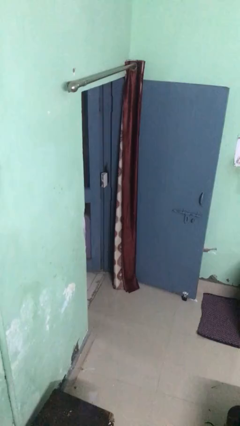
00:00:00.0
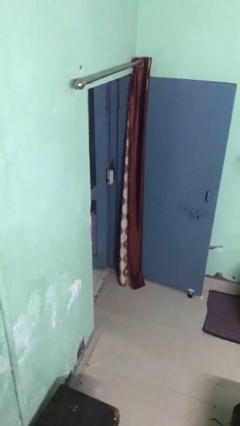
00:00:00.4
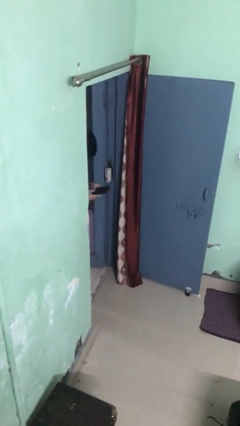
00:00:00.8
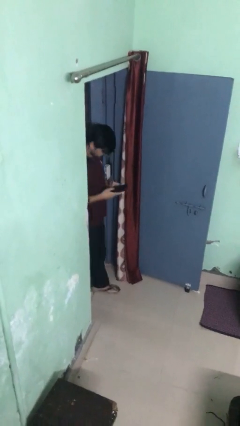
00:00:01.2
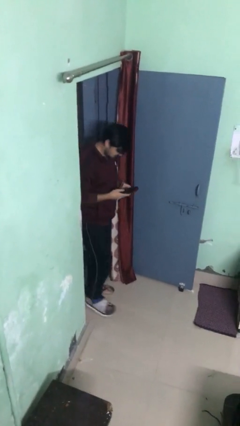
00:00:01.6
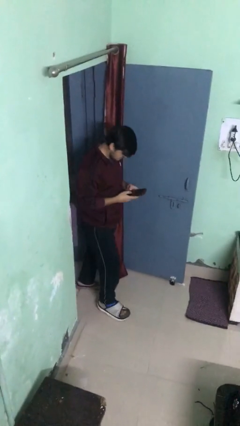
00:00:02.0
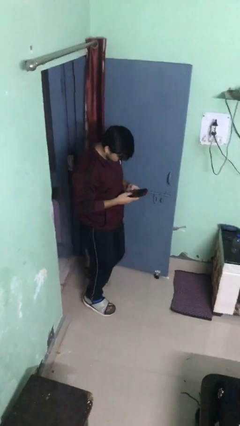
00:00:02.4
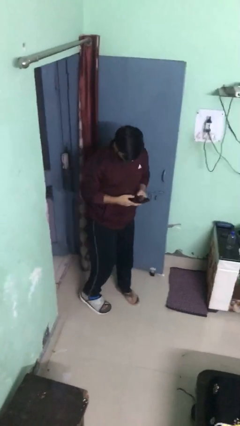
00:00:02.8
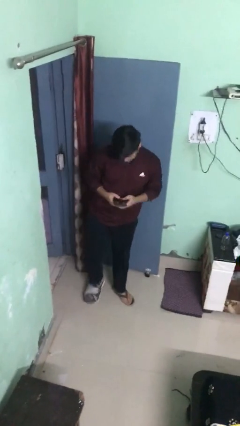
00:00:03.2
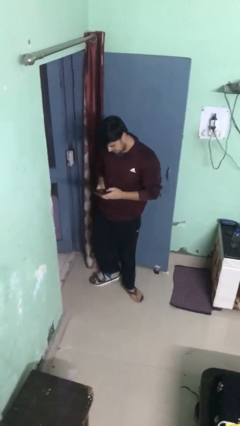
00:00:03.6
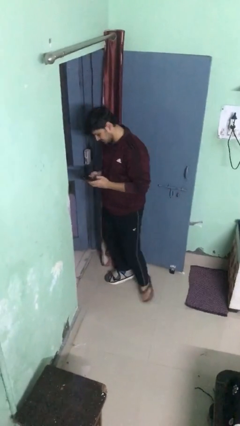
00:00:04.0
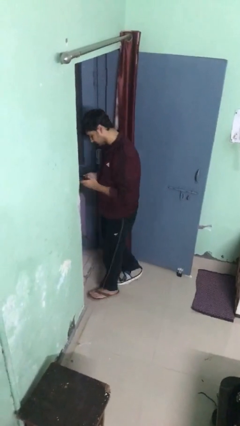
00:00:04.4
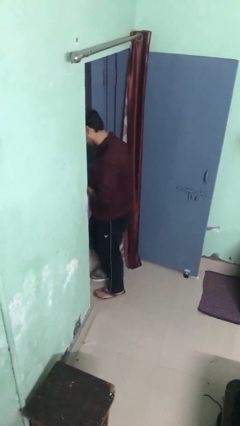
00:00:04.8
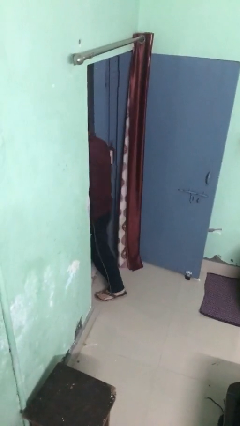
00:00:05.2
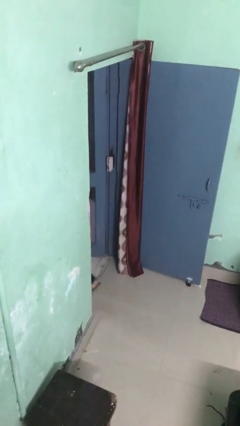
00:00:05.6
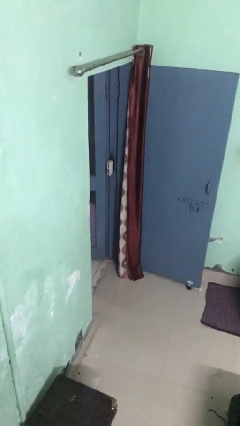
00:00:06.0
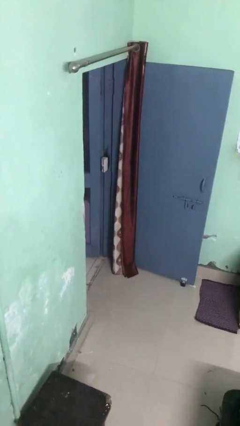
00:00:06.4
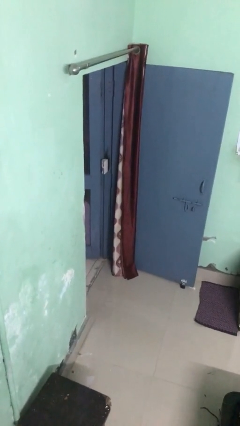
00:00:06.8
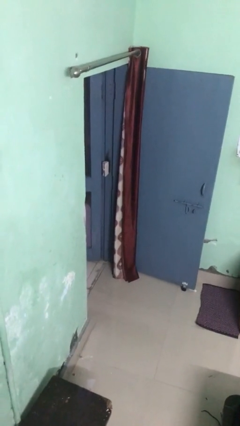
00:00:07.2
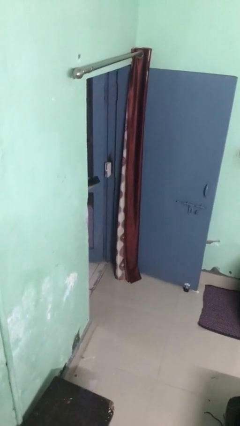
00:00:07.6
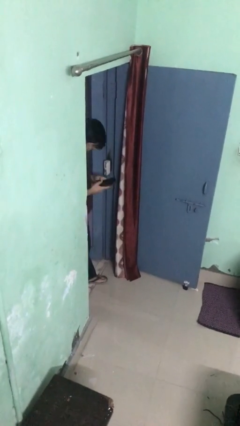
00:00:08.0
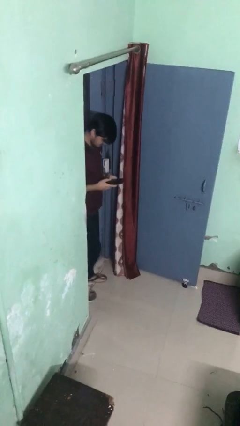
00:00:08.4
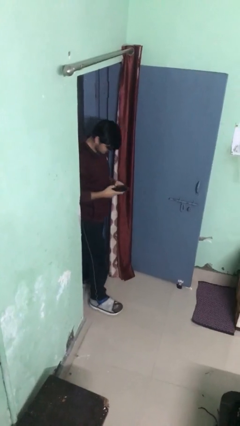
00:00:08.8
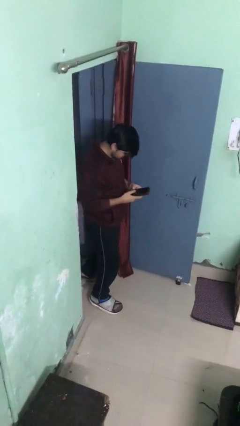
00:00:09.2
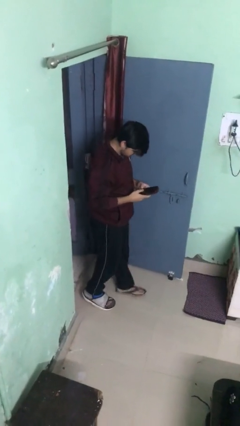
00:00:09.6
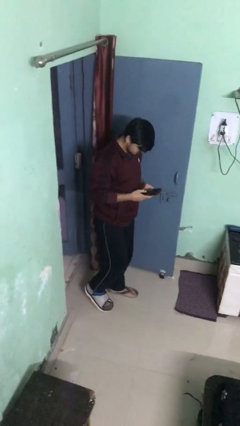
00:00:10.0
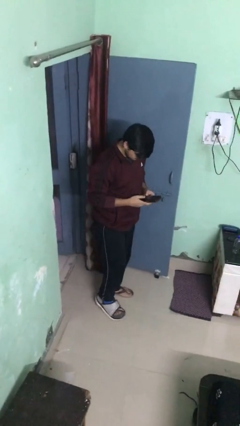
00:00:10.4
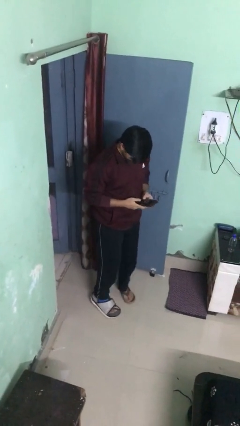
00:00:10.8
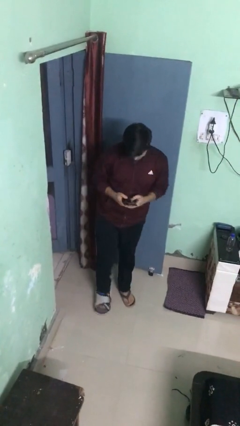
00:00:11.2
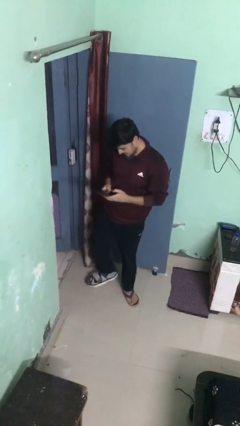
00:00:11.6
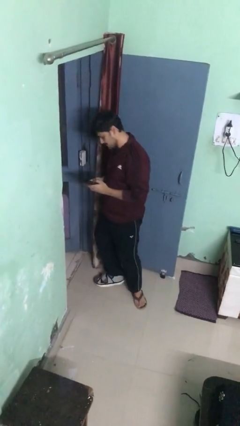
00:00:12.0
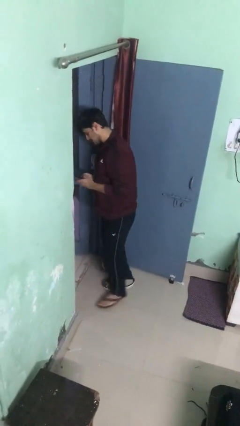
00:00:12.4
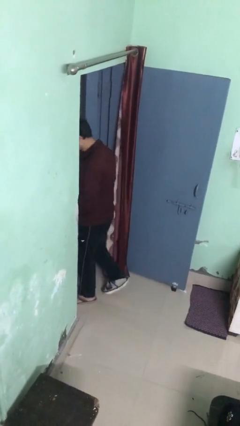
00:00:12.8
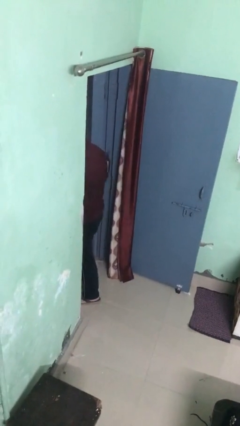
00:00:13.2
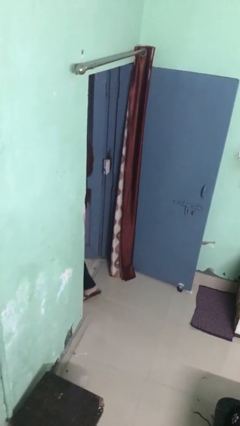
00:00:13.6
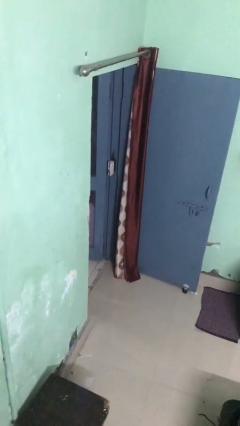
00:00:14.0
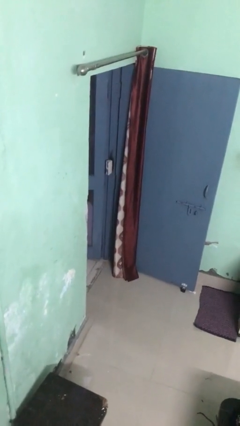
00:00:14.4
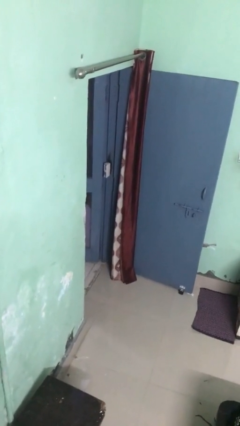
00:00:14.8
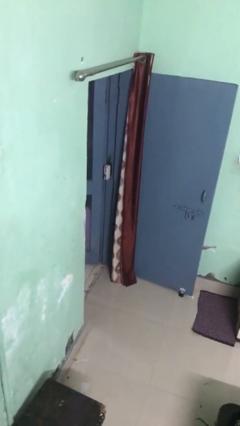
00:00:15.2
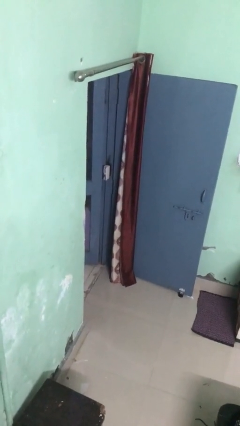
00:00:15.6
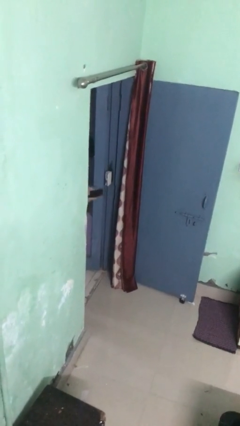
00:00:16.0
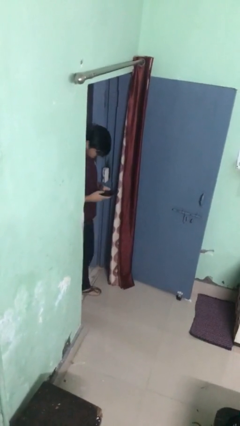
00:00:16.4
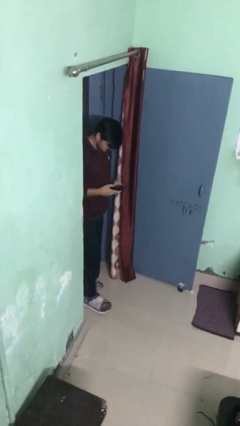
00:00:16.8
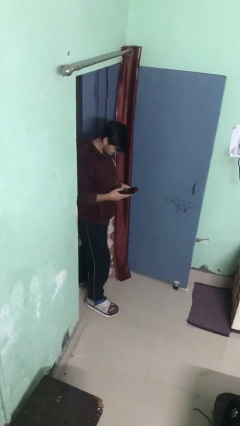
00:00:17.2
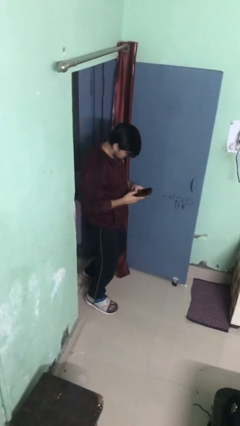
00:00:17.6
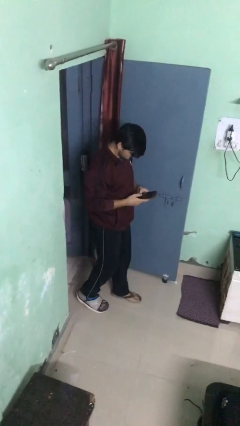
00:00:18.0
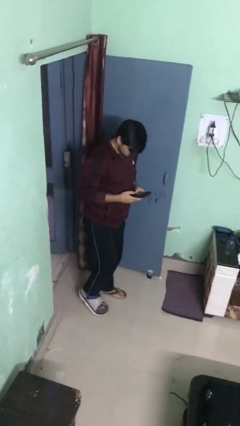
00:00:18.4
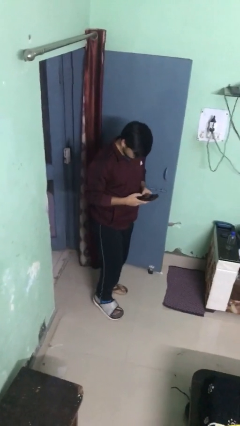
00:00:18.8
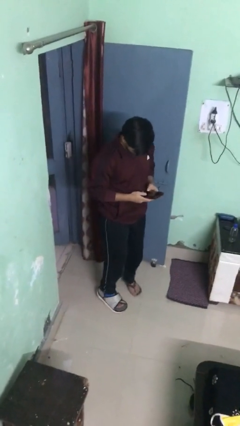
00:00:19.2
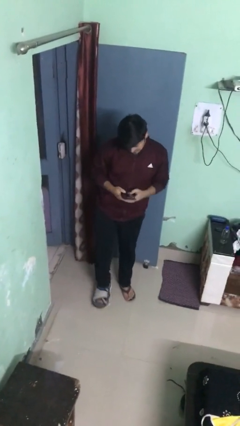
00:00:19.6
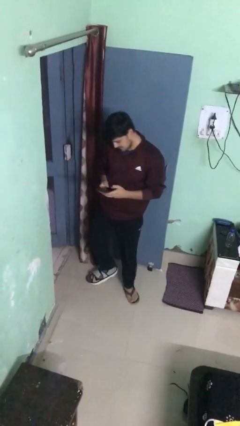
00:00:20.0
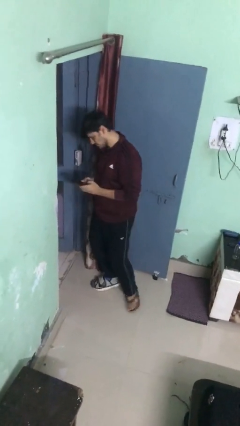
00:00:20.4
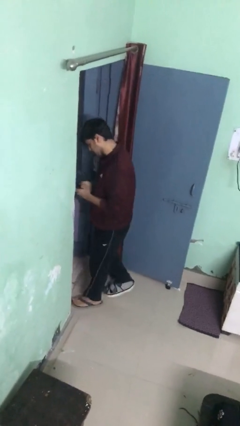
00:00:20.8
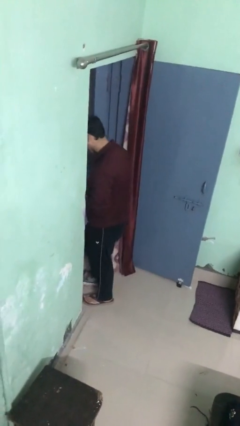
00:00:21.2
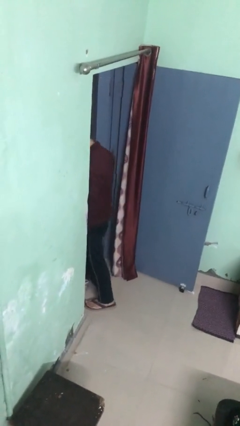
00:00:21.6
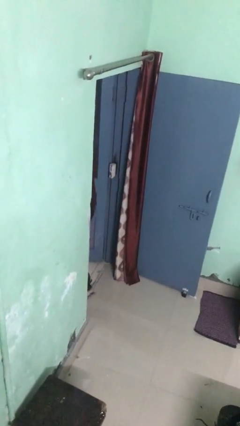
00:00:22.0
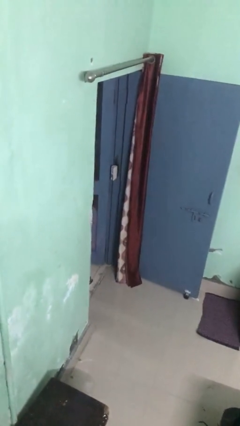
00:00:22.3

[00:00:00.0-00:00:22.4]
person texts on phone

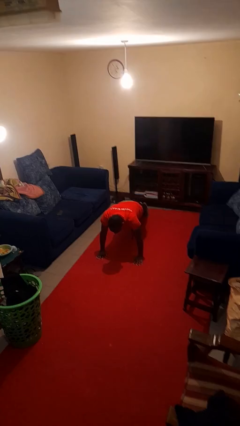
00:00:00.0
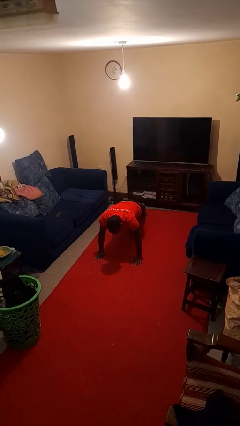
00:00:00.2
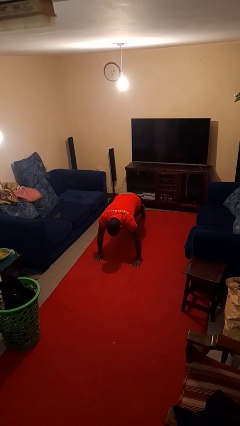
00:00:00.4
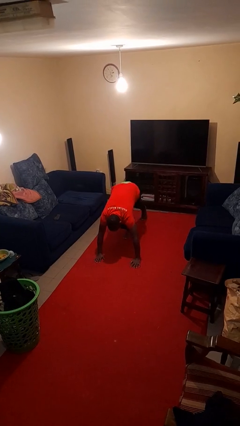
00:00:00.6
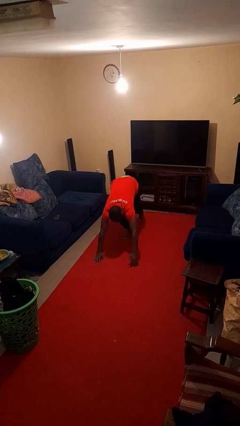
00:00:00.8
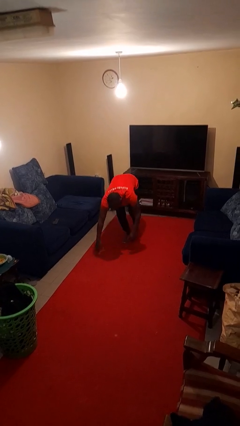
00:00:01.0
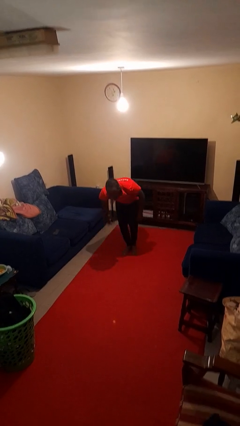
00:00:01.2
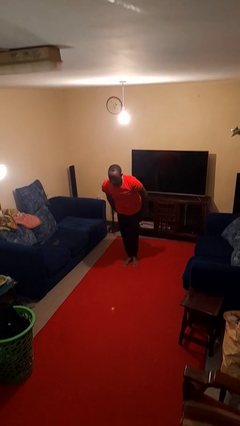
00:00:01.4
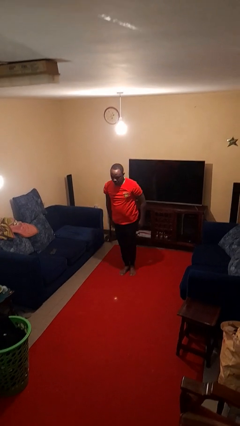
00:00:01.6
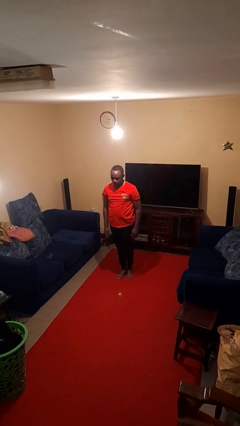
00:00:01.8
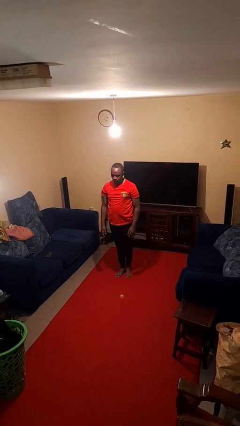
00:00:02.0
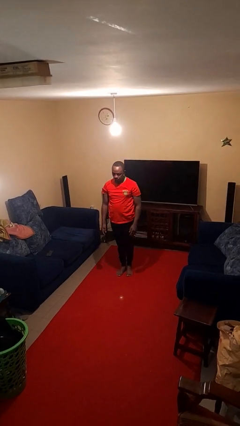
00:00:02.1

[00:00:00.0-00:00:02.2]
person stands up from floor

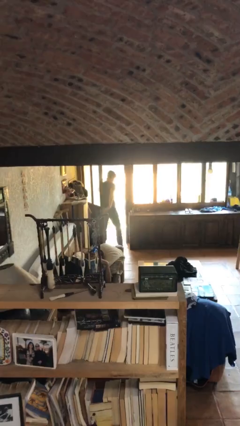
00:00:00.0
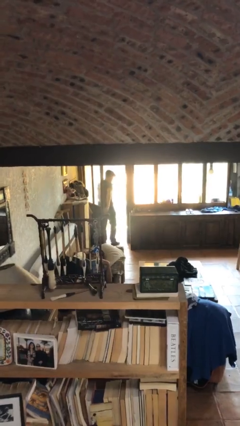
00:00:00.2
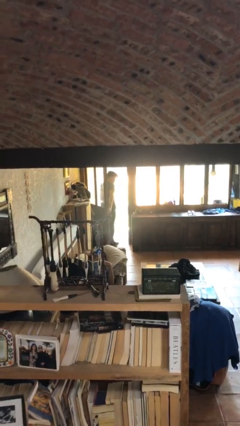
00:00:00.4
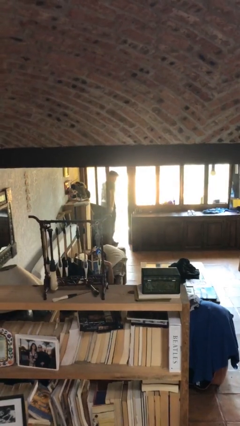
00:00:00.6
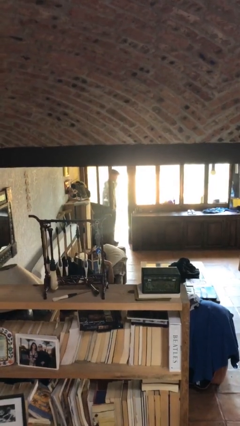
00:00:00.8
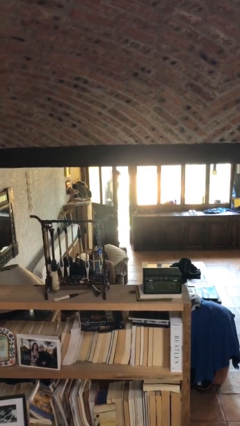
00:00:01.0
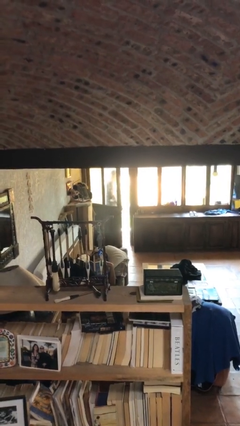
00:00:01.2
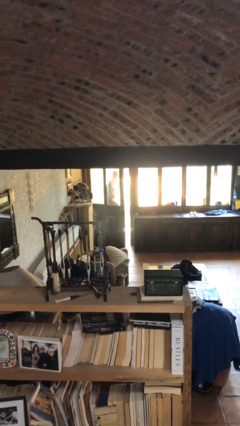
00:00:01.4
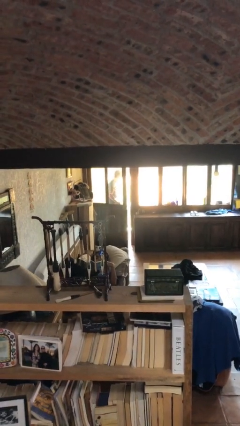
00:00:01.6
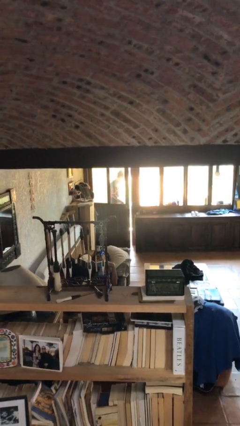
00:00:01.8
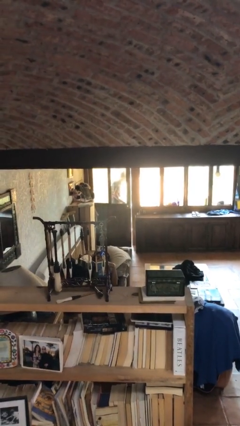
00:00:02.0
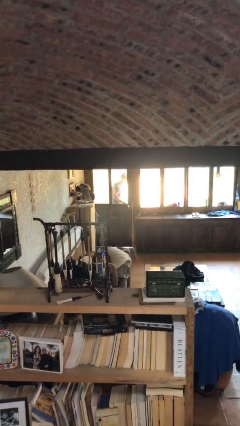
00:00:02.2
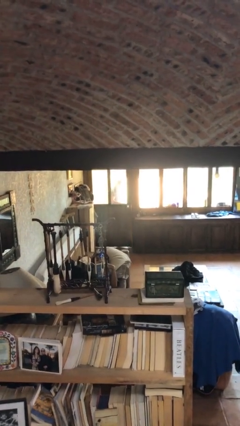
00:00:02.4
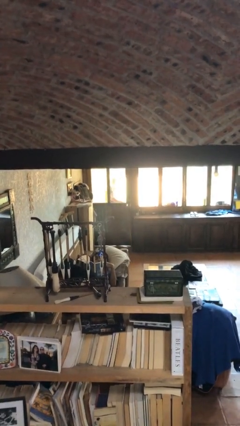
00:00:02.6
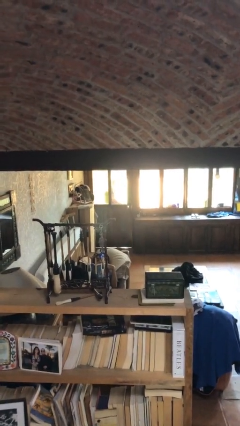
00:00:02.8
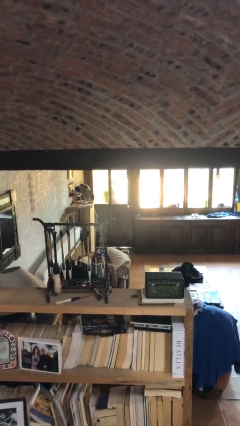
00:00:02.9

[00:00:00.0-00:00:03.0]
person closes facility door

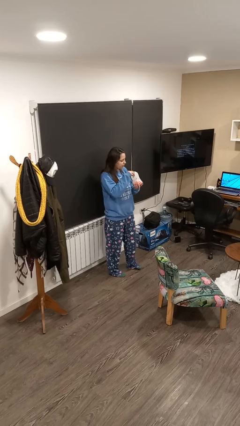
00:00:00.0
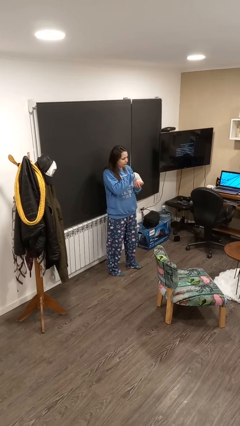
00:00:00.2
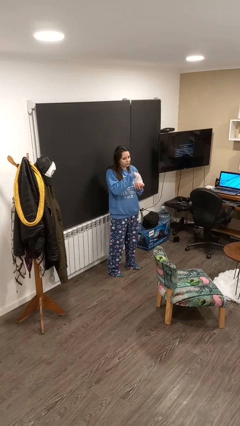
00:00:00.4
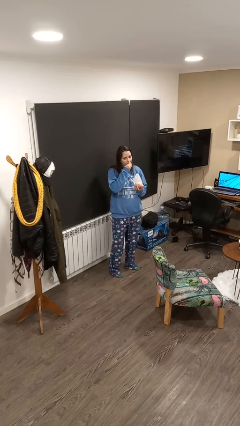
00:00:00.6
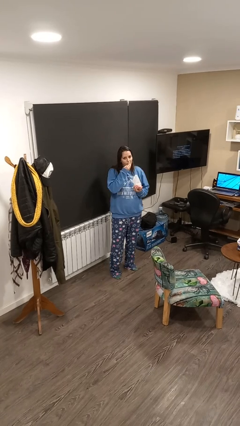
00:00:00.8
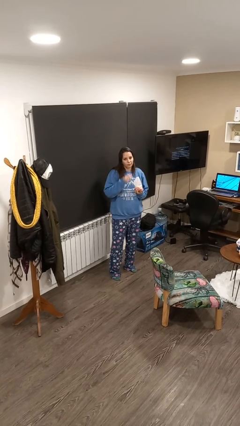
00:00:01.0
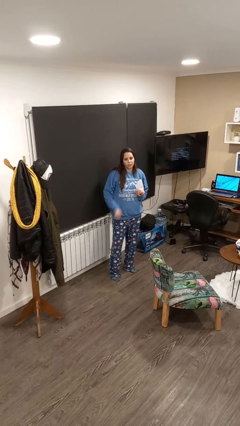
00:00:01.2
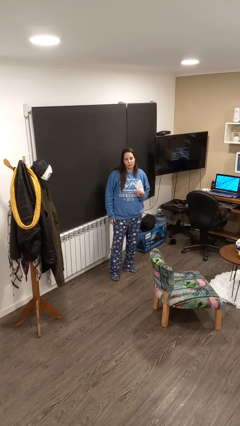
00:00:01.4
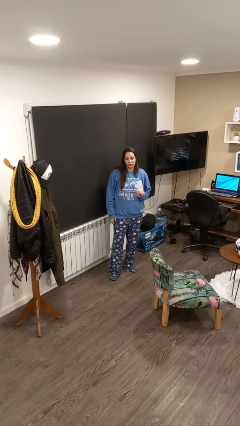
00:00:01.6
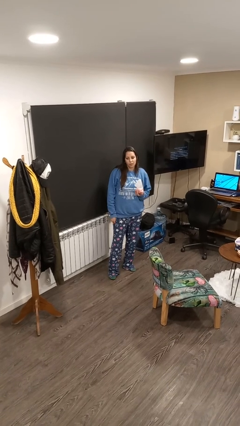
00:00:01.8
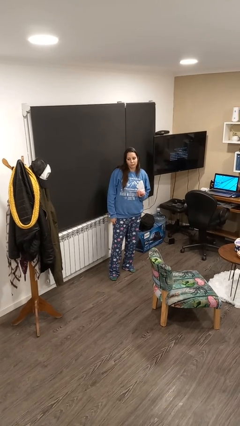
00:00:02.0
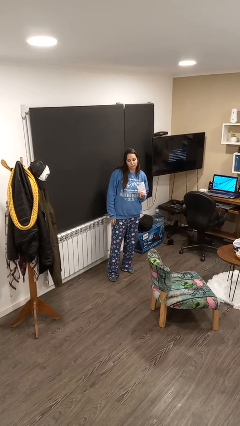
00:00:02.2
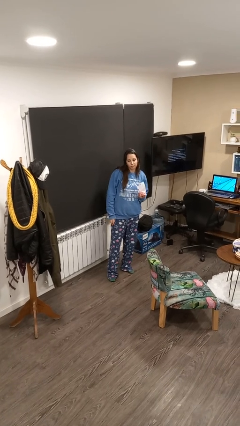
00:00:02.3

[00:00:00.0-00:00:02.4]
person eats snack from bag
